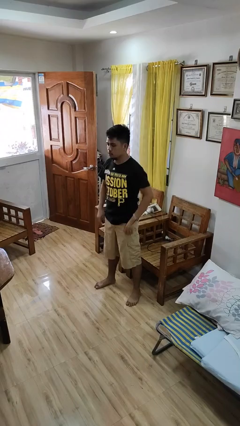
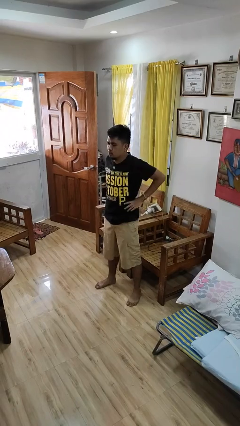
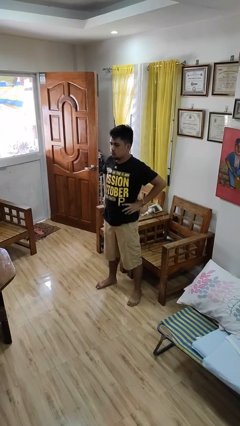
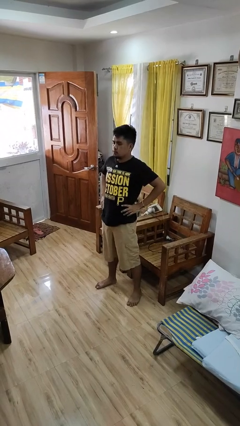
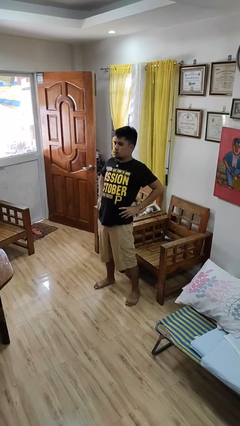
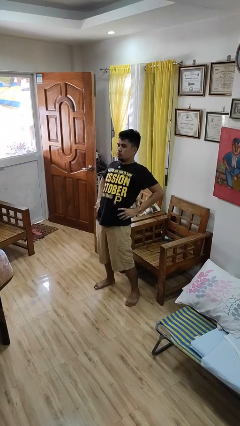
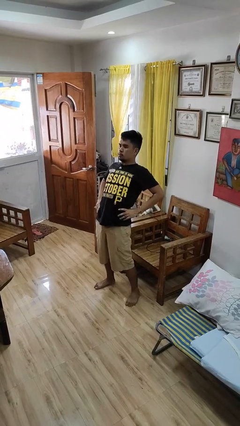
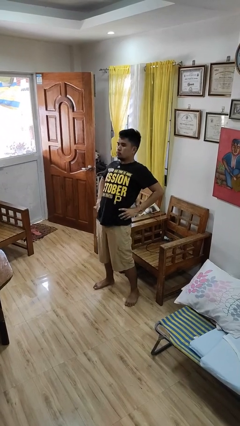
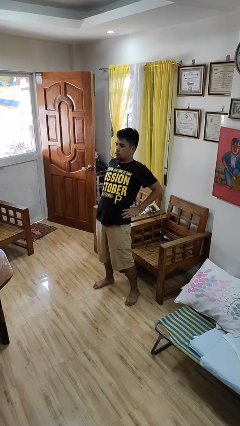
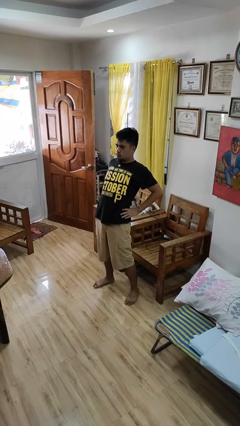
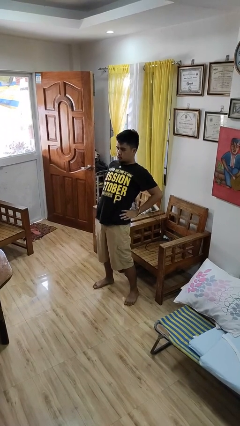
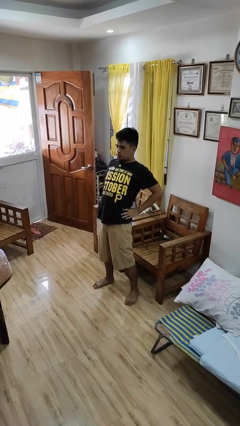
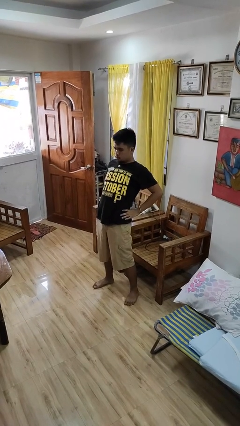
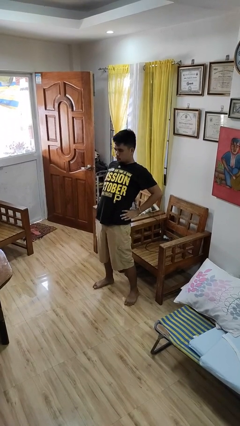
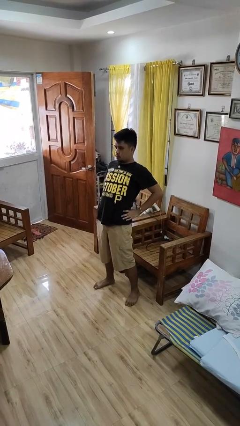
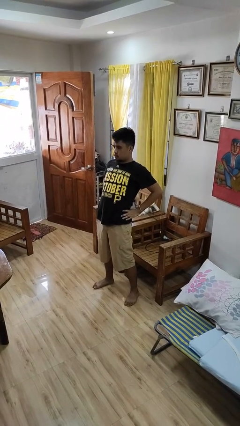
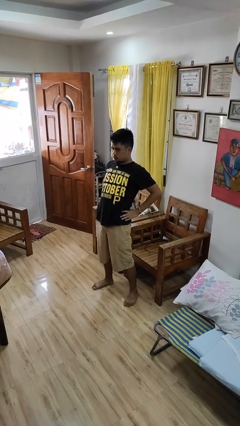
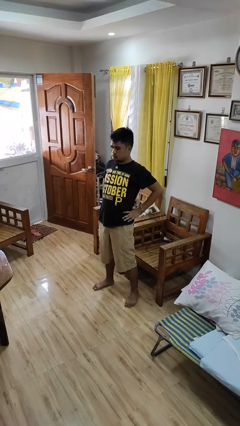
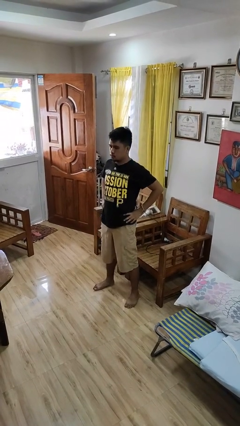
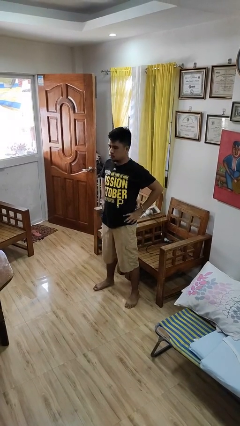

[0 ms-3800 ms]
person stretches back

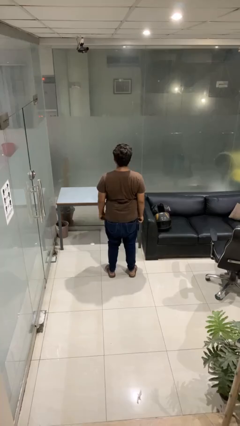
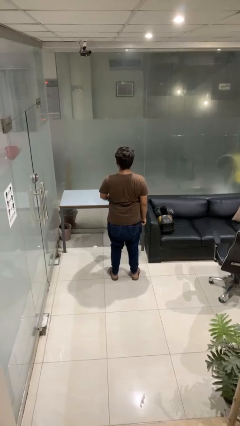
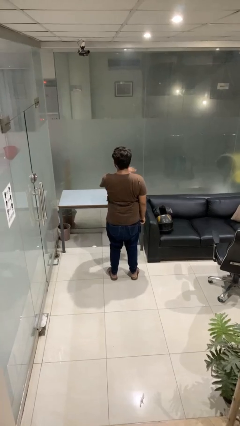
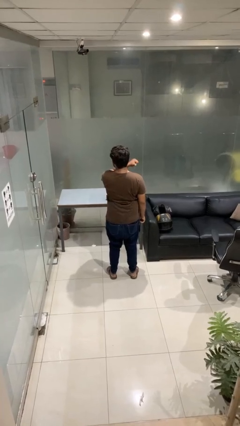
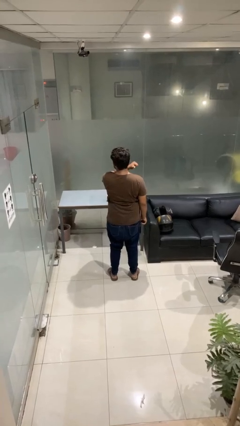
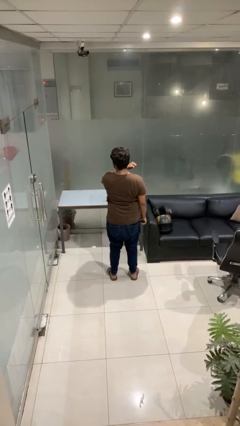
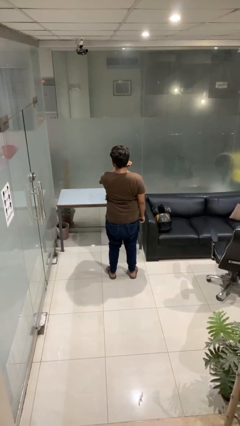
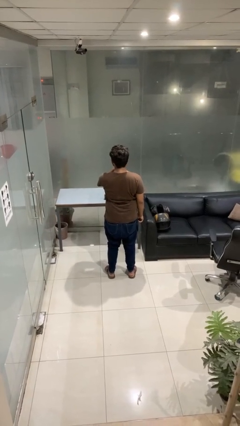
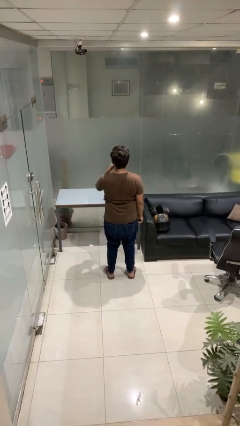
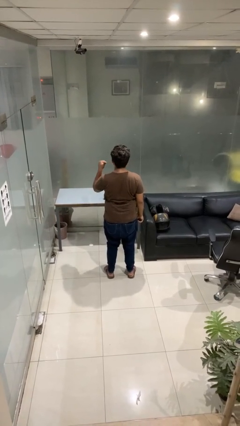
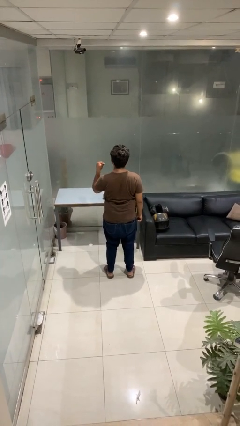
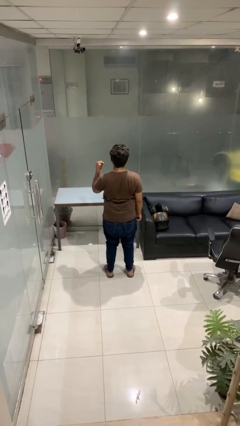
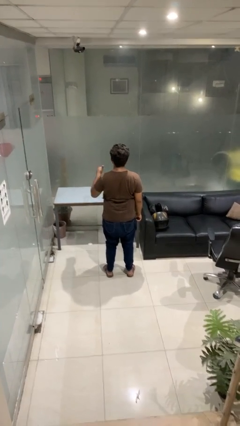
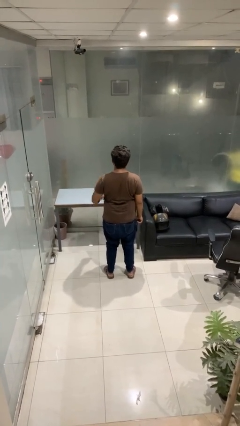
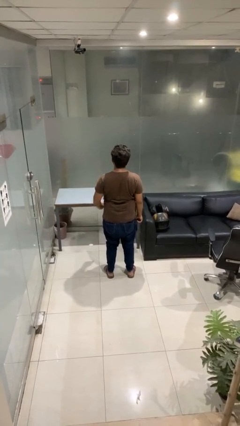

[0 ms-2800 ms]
person gestures cut

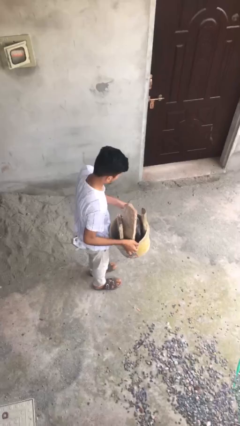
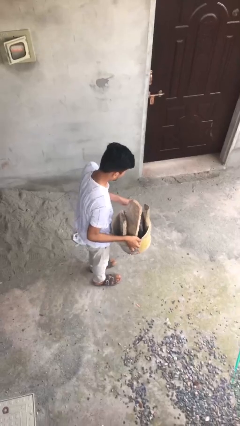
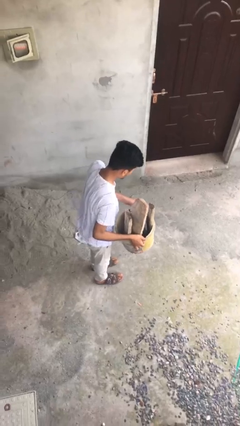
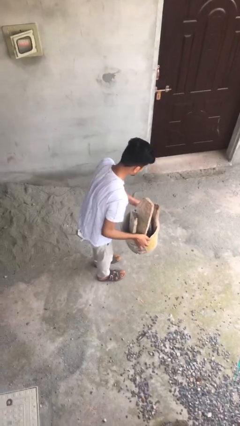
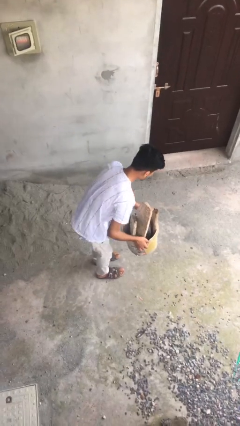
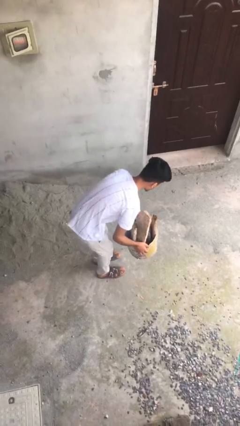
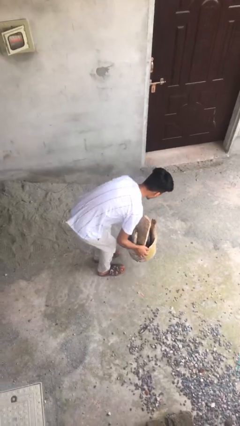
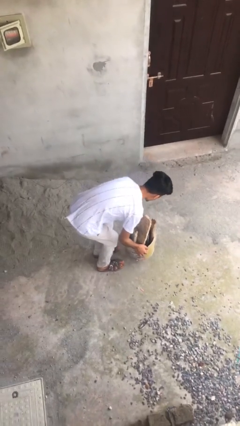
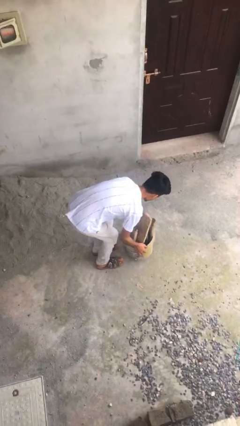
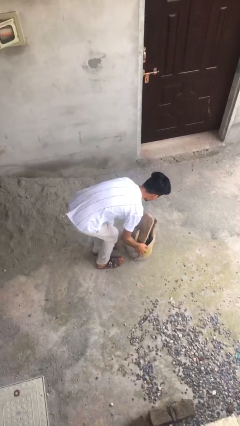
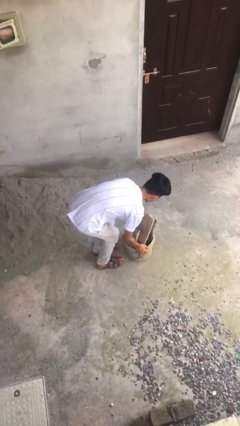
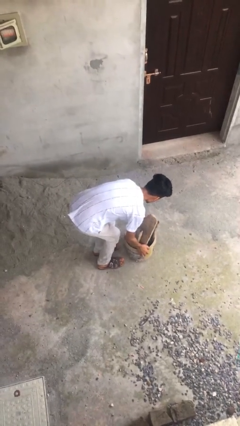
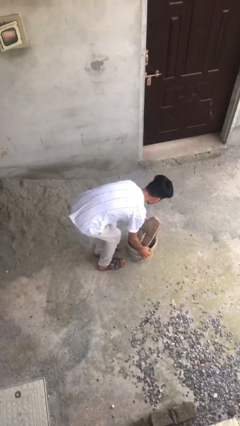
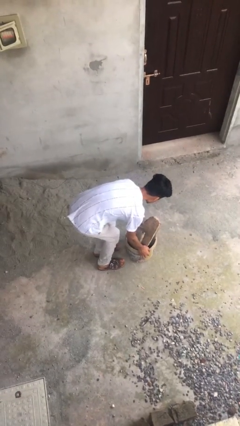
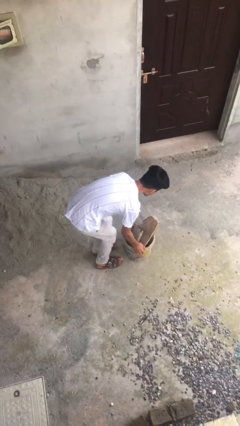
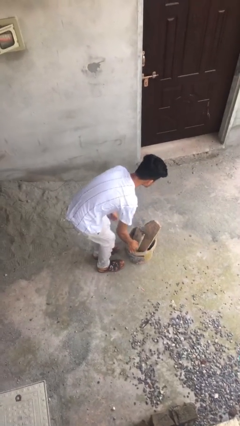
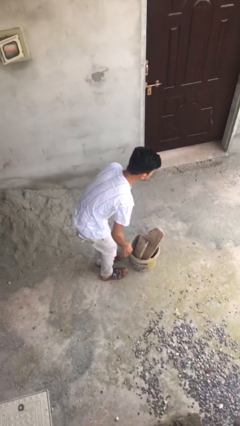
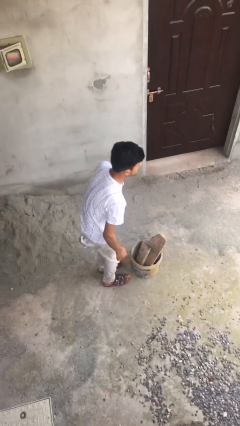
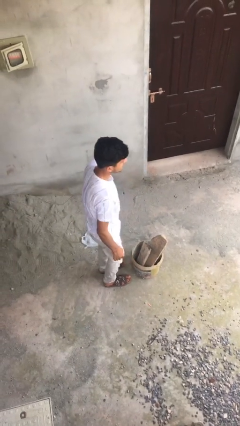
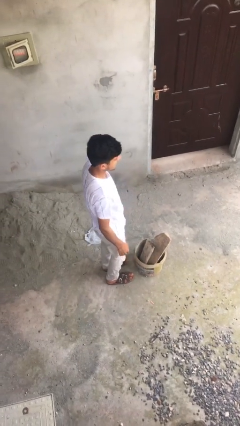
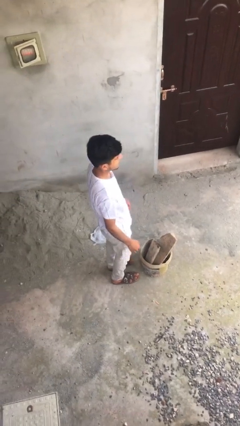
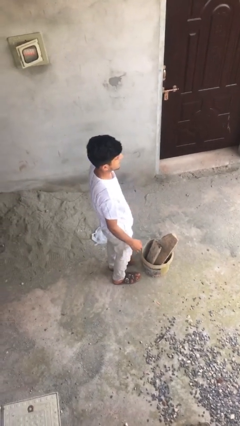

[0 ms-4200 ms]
person puts down object on floor

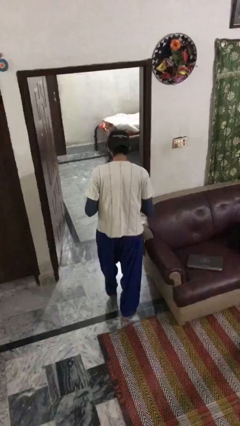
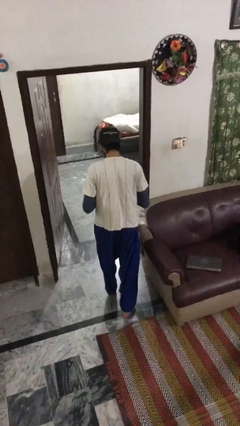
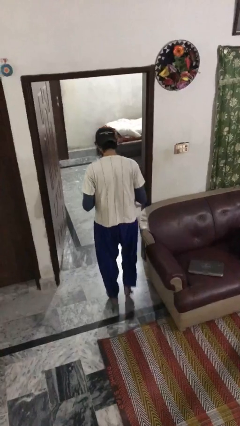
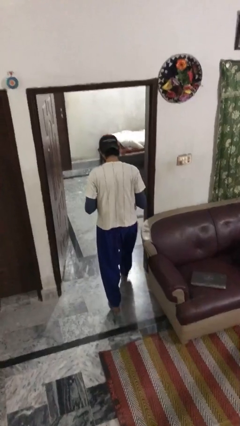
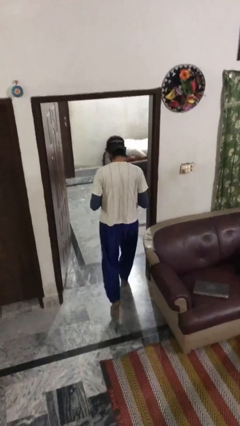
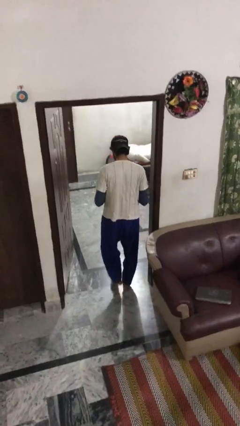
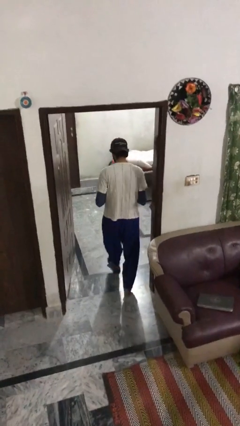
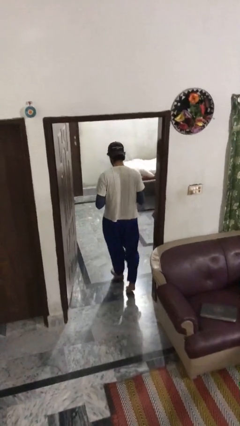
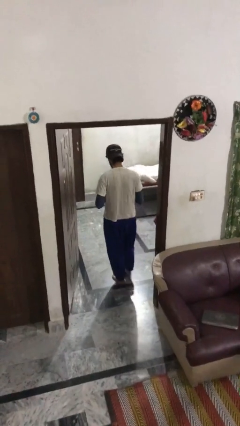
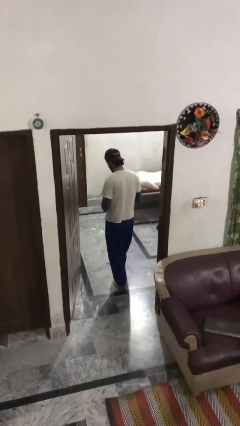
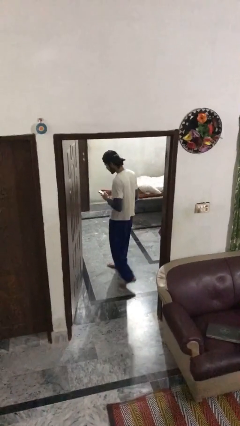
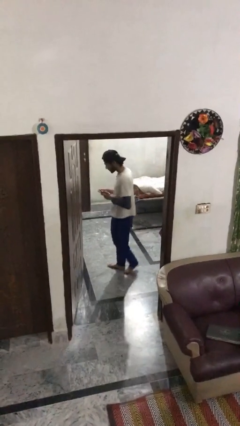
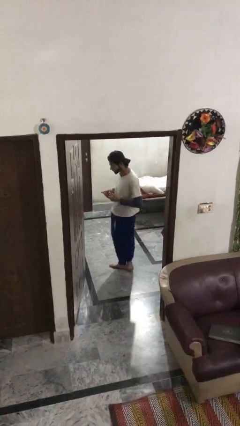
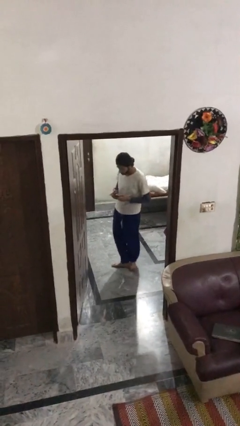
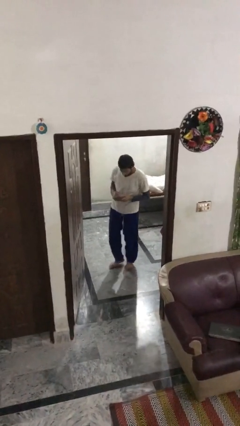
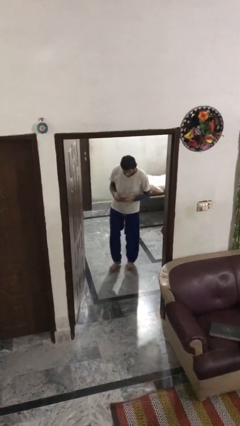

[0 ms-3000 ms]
person exits scene through structure

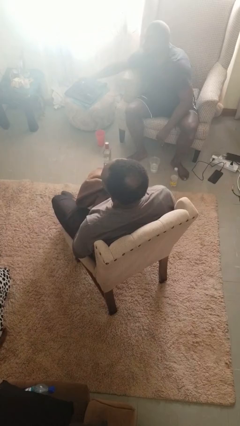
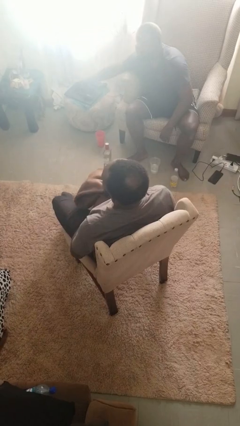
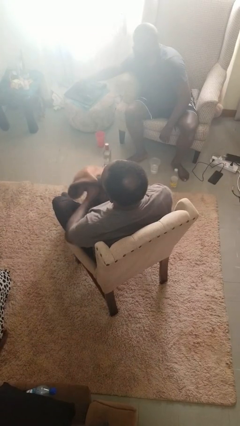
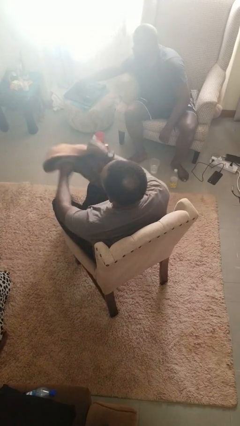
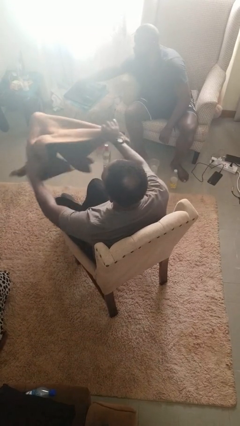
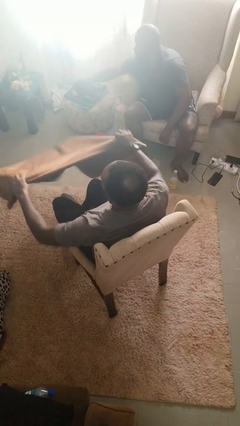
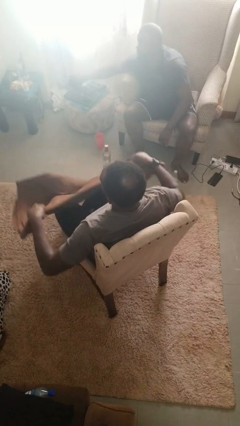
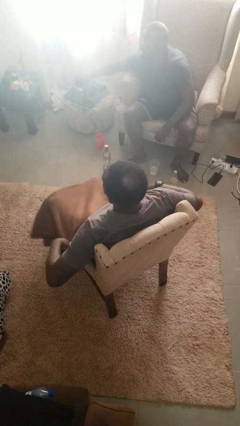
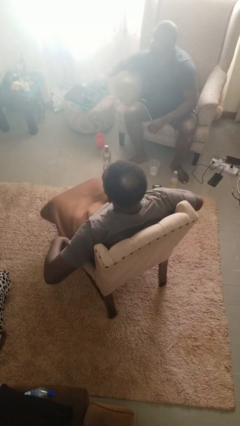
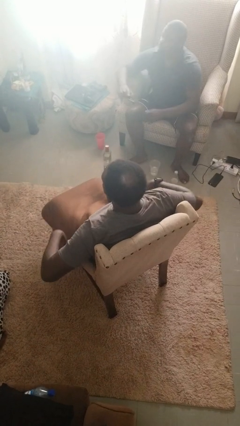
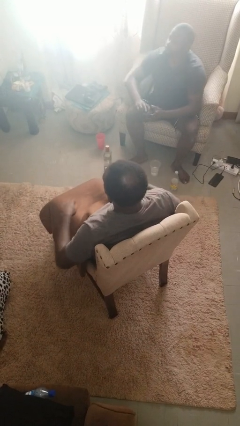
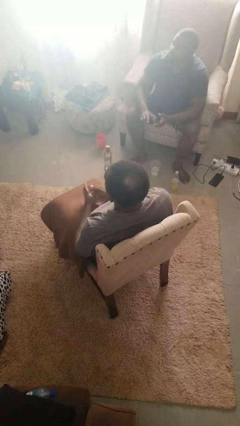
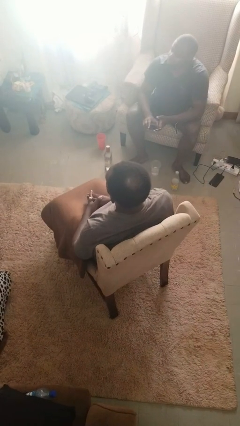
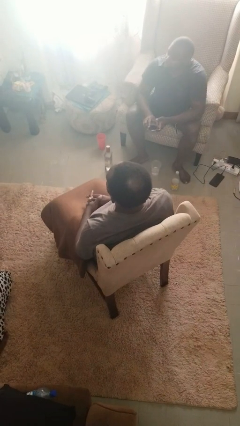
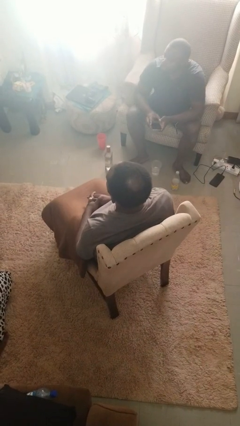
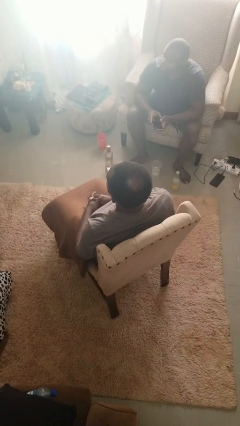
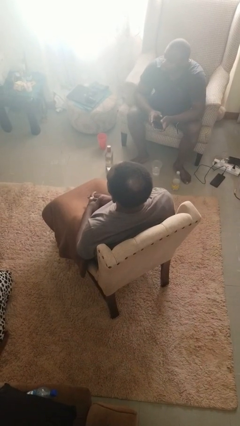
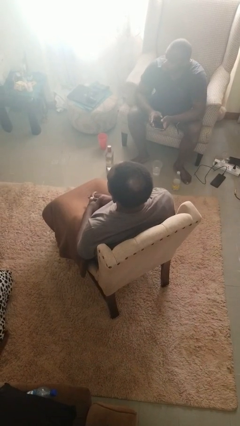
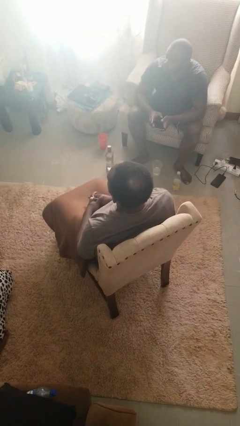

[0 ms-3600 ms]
person covers with blanket
